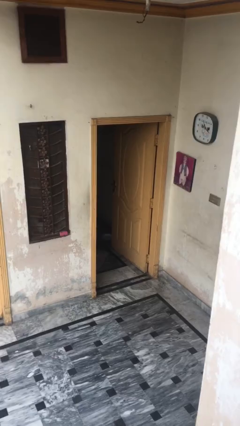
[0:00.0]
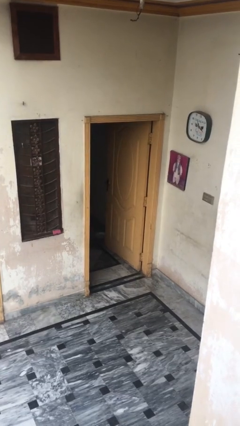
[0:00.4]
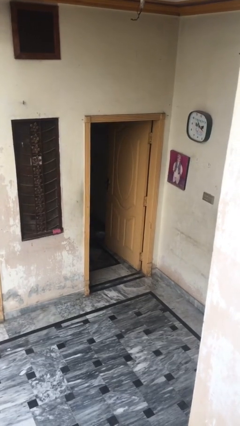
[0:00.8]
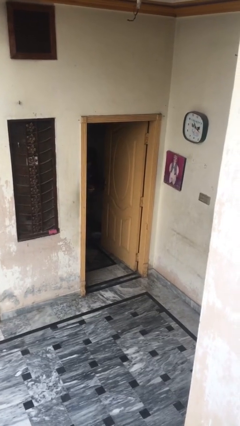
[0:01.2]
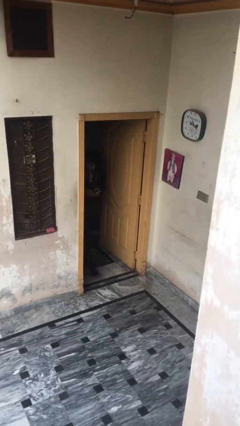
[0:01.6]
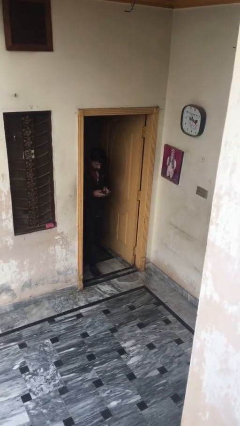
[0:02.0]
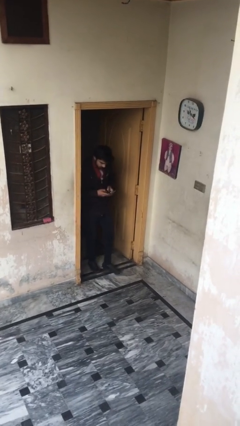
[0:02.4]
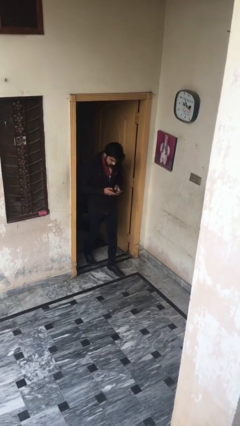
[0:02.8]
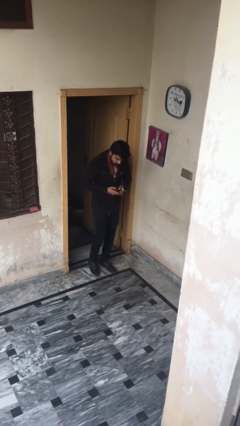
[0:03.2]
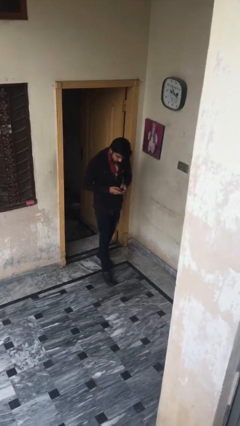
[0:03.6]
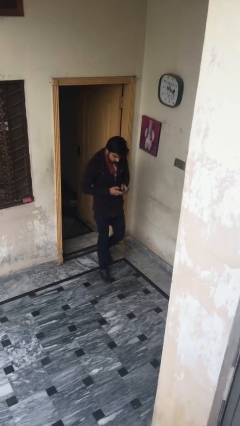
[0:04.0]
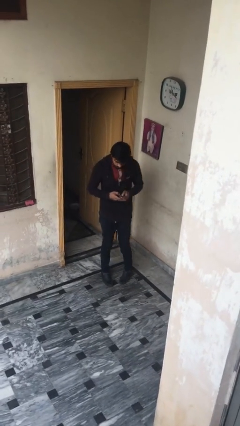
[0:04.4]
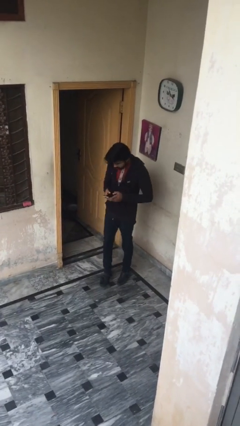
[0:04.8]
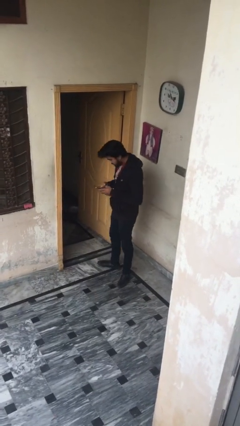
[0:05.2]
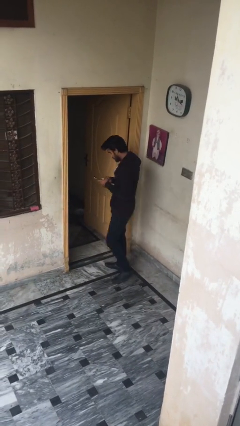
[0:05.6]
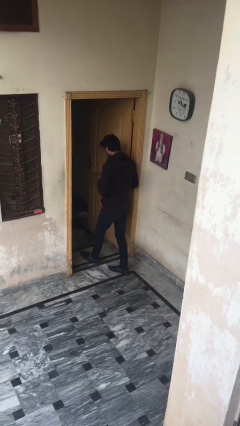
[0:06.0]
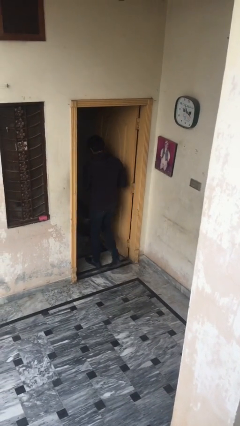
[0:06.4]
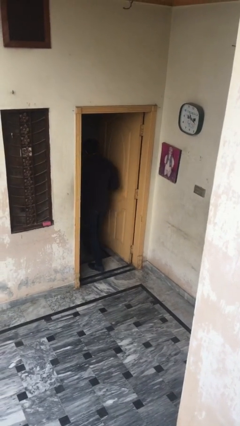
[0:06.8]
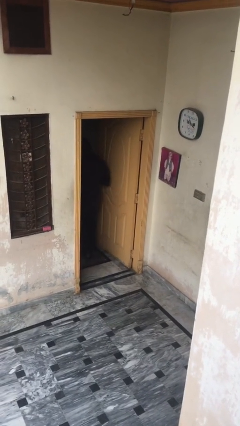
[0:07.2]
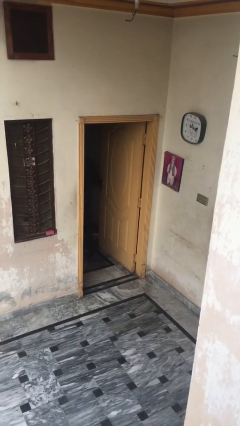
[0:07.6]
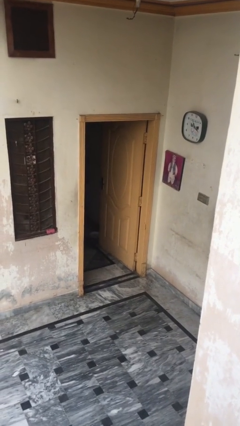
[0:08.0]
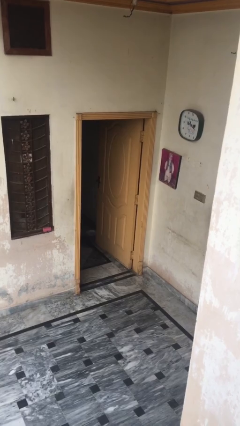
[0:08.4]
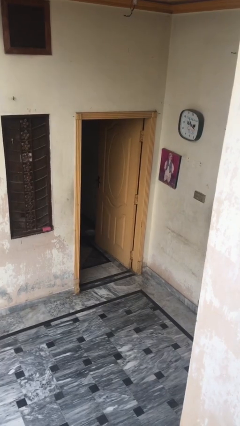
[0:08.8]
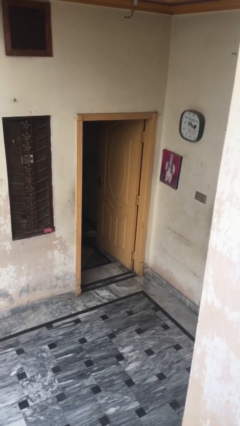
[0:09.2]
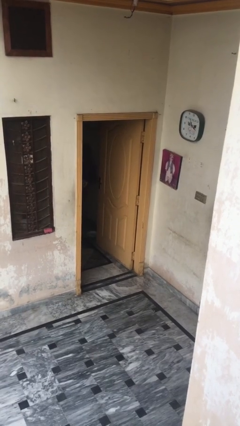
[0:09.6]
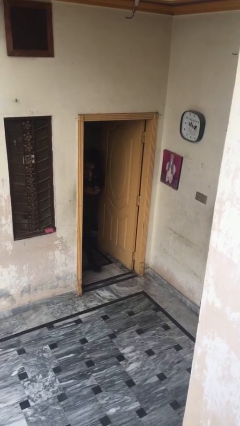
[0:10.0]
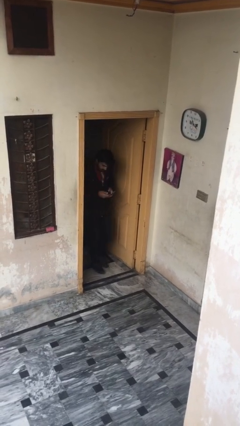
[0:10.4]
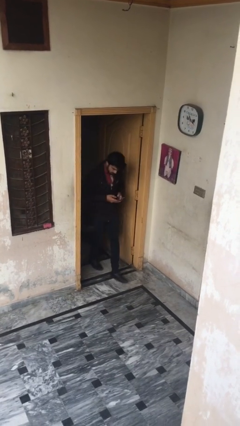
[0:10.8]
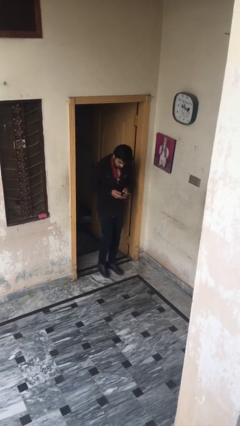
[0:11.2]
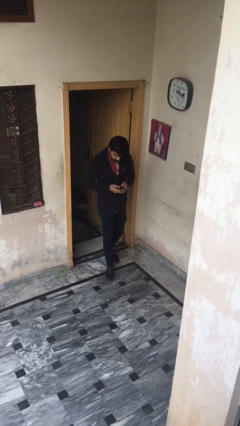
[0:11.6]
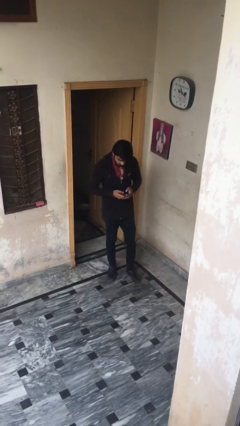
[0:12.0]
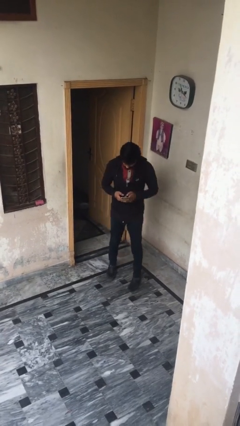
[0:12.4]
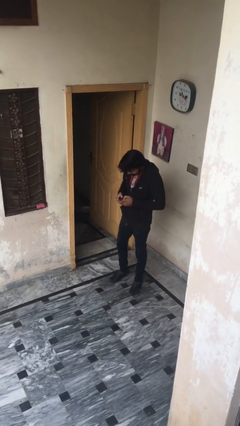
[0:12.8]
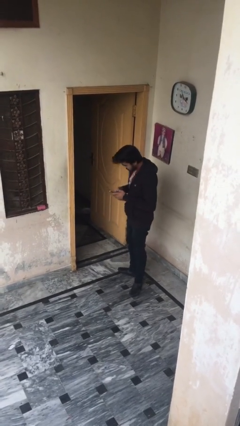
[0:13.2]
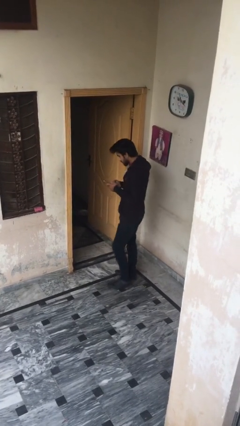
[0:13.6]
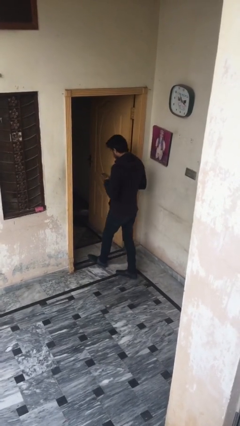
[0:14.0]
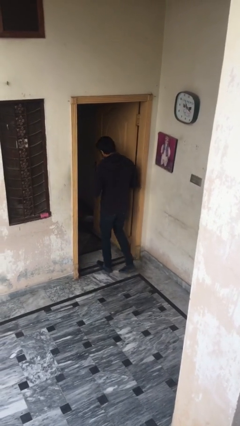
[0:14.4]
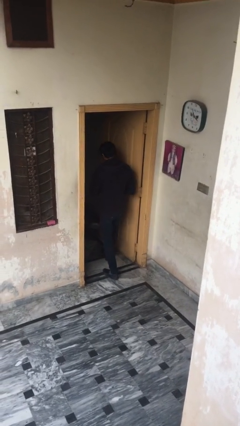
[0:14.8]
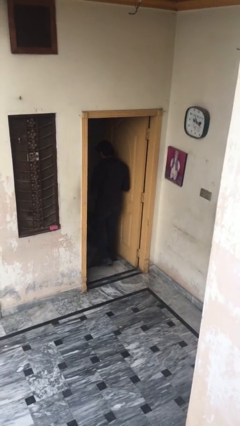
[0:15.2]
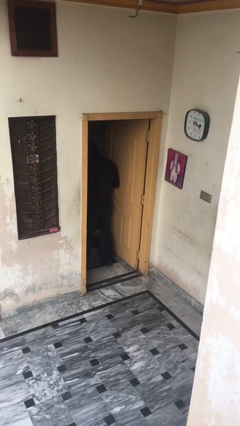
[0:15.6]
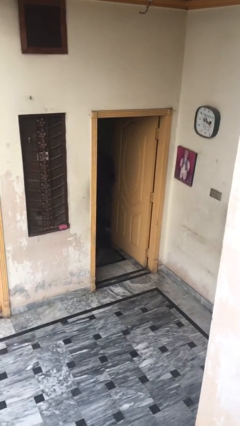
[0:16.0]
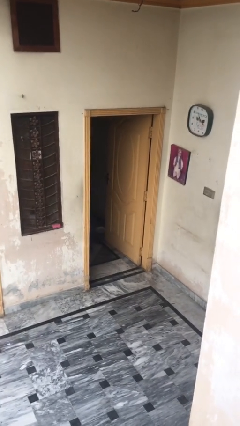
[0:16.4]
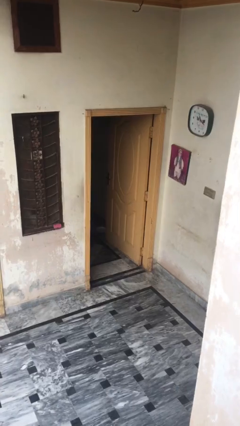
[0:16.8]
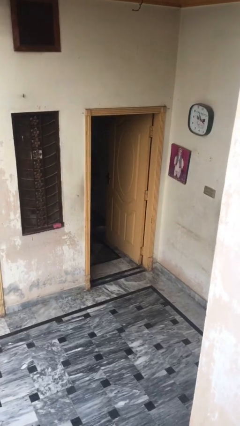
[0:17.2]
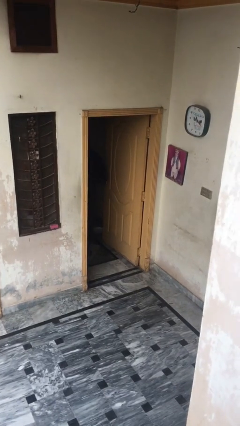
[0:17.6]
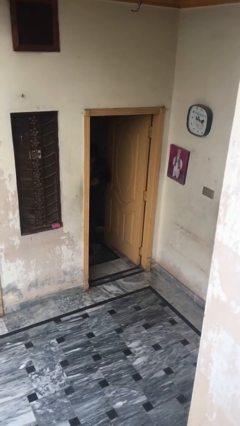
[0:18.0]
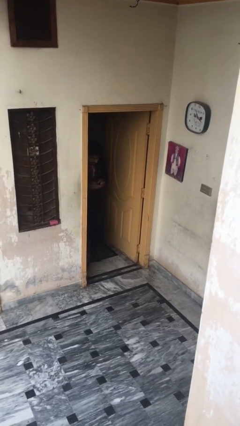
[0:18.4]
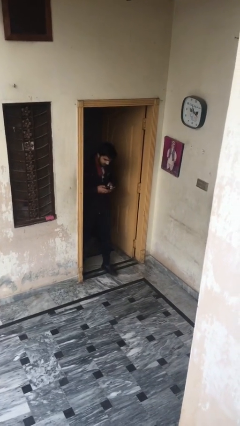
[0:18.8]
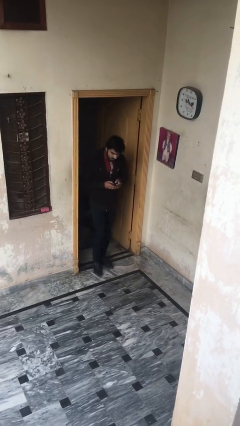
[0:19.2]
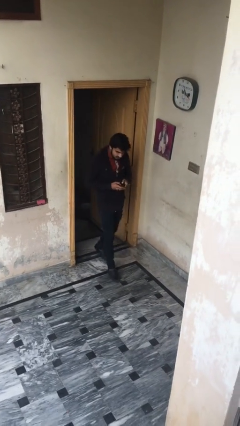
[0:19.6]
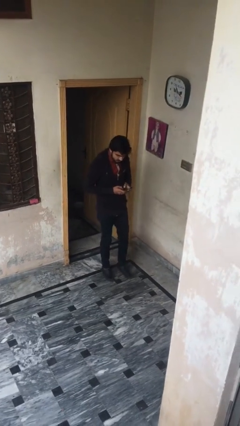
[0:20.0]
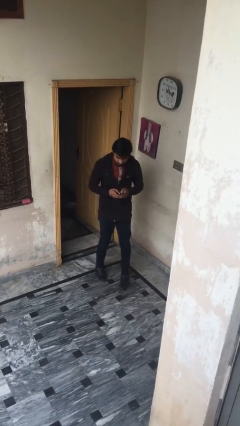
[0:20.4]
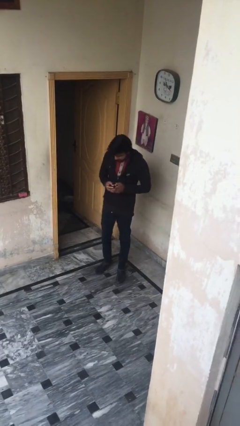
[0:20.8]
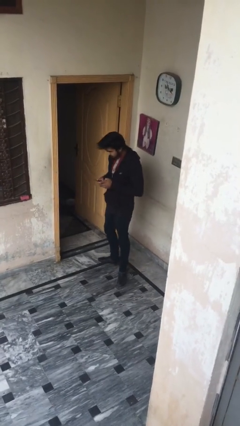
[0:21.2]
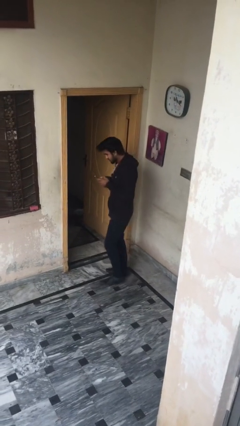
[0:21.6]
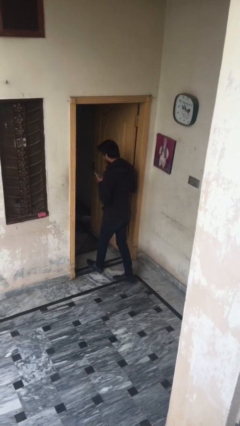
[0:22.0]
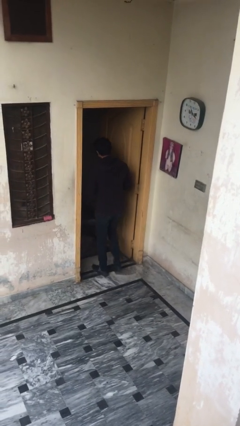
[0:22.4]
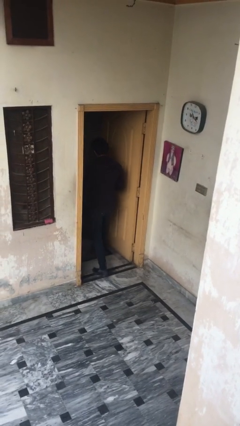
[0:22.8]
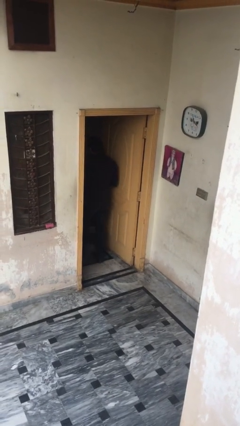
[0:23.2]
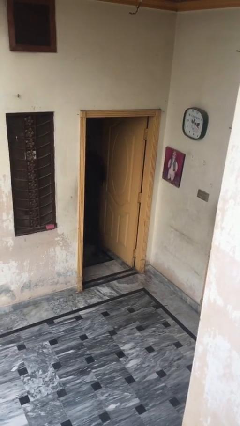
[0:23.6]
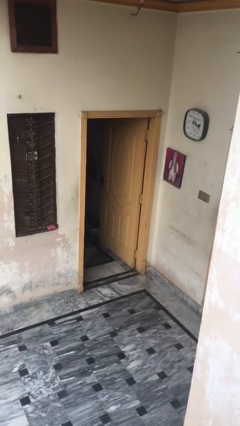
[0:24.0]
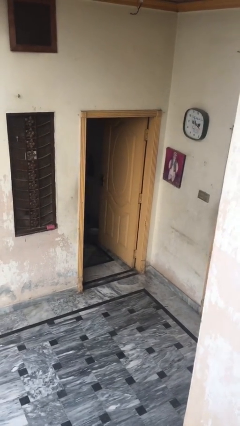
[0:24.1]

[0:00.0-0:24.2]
person texts on phone

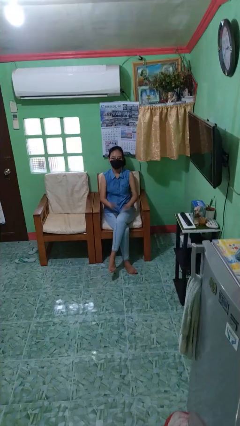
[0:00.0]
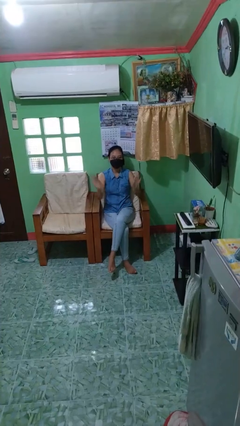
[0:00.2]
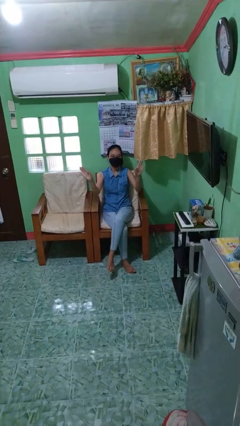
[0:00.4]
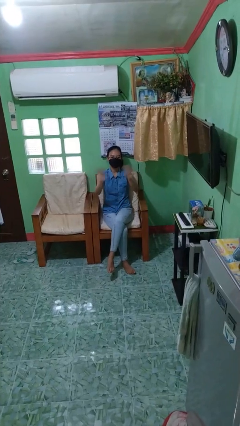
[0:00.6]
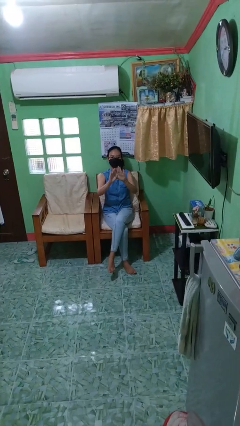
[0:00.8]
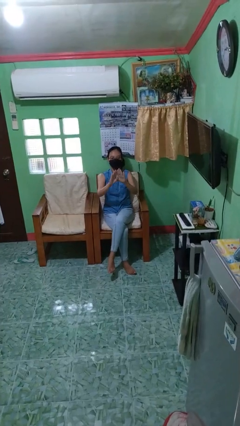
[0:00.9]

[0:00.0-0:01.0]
person gestures zoom out

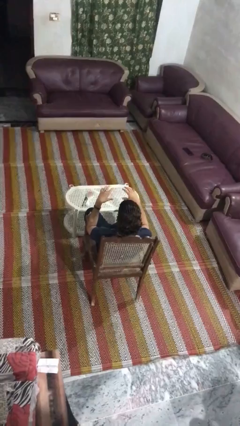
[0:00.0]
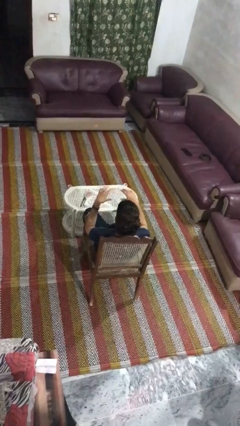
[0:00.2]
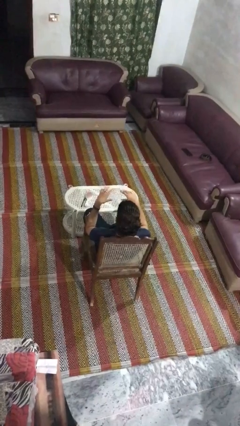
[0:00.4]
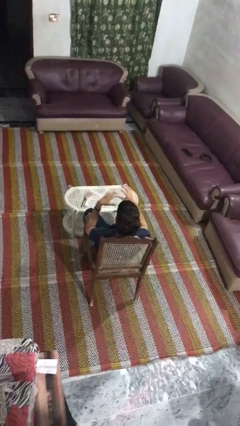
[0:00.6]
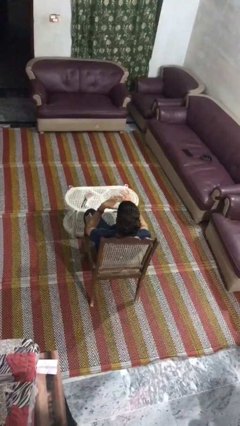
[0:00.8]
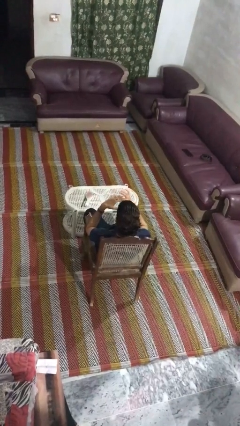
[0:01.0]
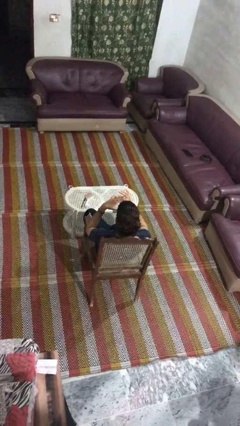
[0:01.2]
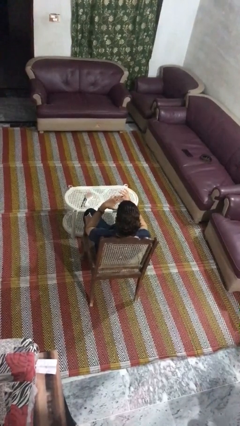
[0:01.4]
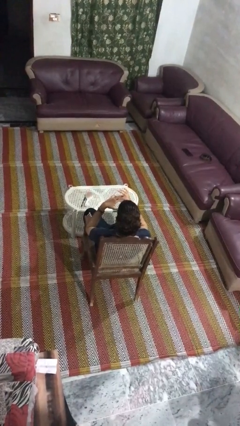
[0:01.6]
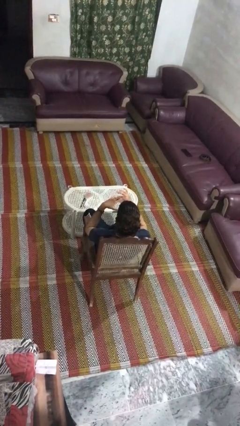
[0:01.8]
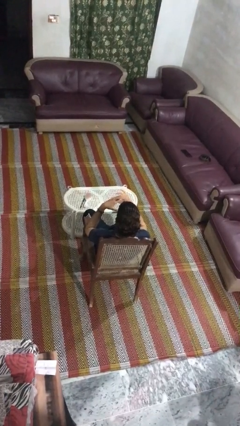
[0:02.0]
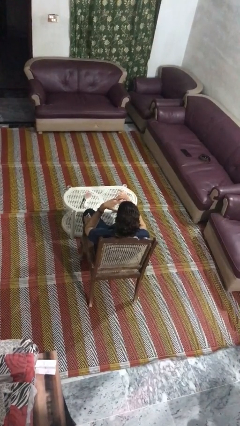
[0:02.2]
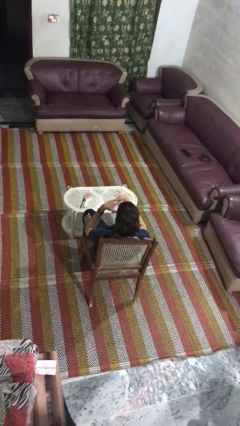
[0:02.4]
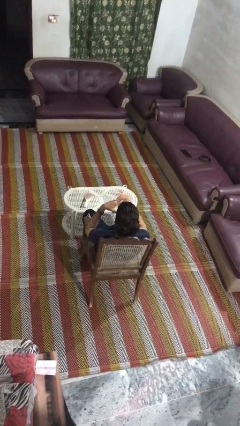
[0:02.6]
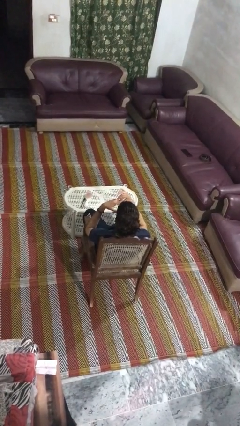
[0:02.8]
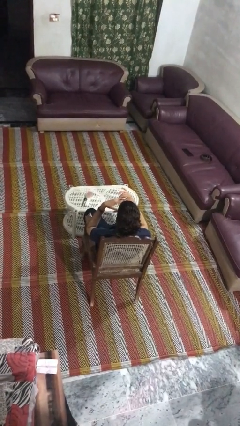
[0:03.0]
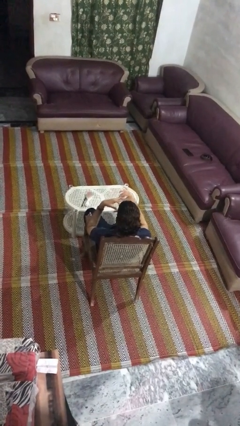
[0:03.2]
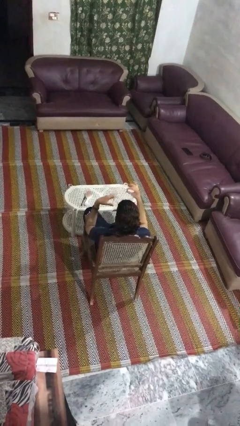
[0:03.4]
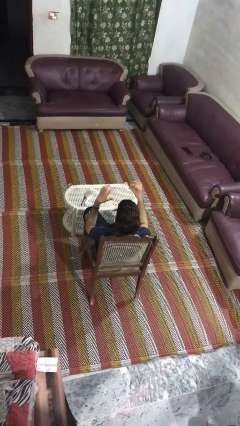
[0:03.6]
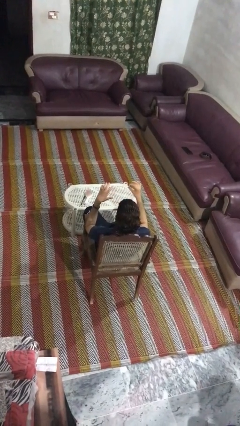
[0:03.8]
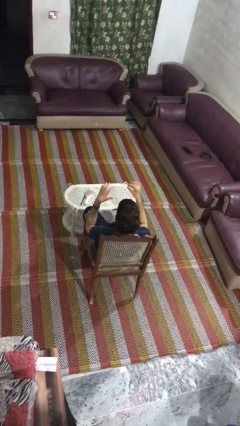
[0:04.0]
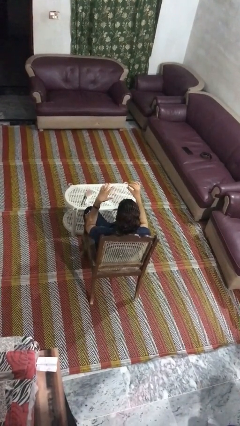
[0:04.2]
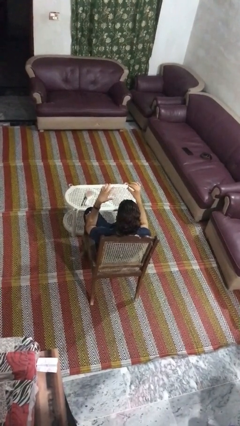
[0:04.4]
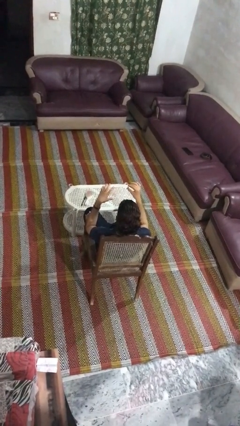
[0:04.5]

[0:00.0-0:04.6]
person takes off ring

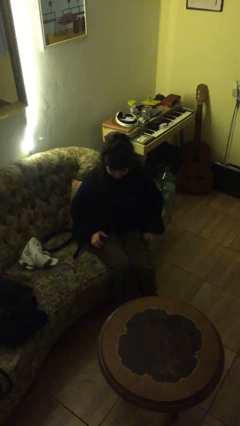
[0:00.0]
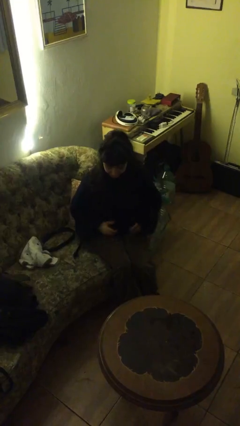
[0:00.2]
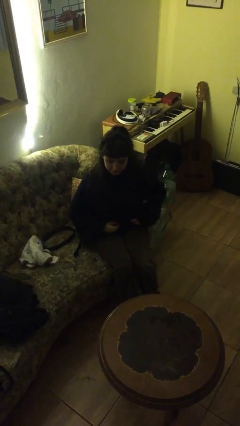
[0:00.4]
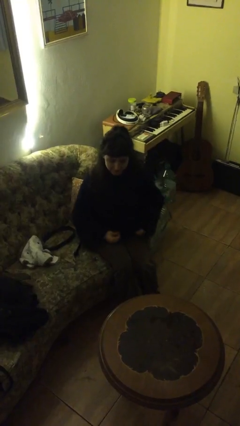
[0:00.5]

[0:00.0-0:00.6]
person slaps hands on thighs
